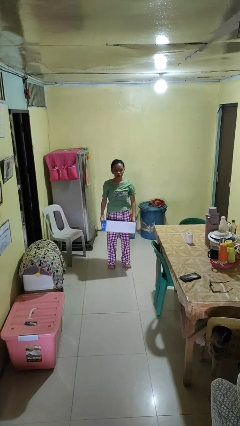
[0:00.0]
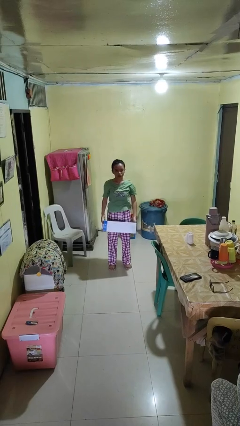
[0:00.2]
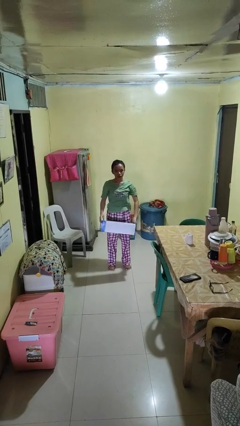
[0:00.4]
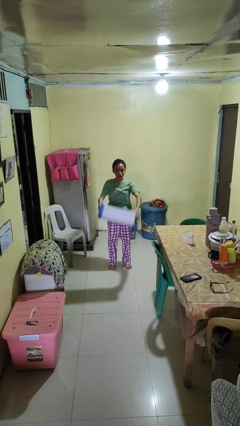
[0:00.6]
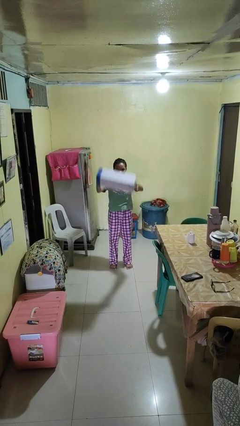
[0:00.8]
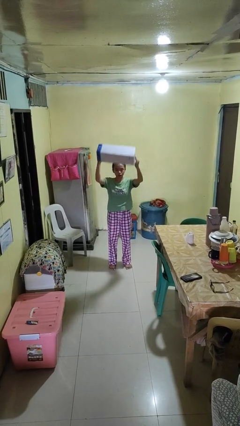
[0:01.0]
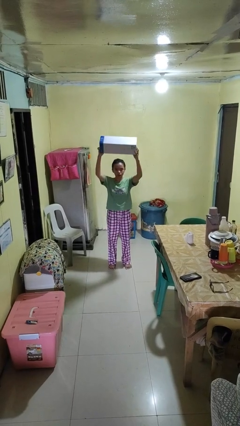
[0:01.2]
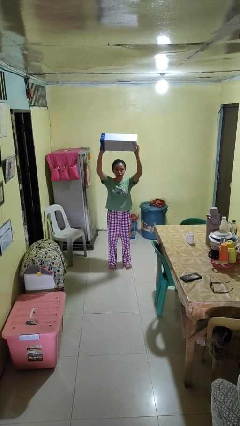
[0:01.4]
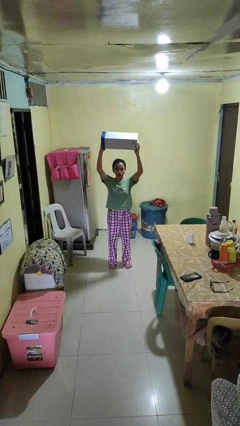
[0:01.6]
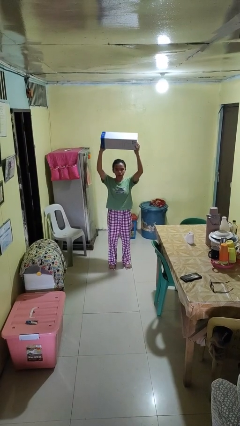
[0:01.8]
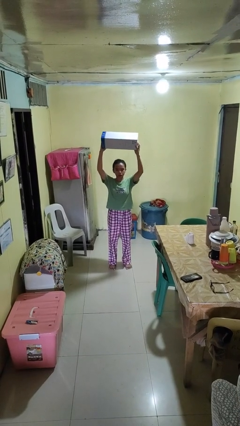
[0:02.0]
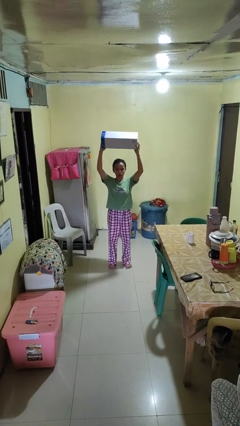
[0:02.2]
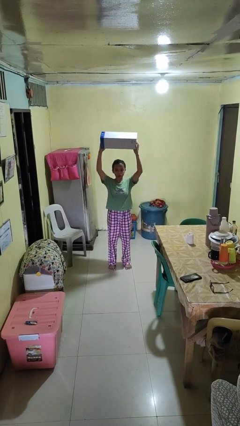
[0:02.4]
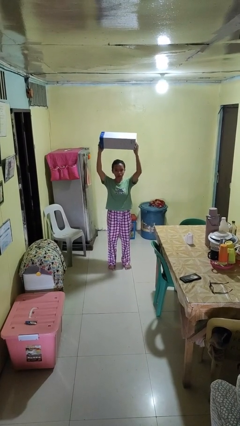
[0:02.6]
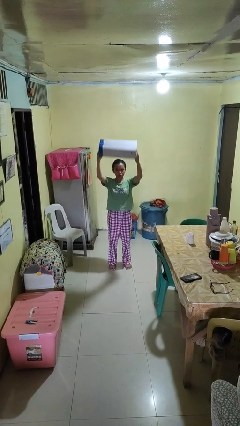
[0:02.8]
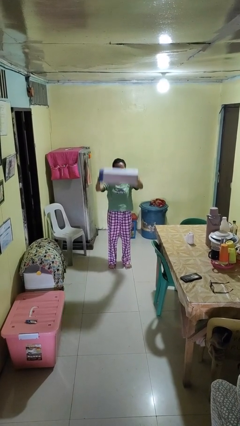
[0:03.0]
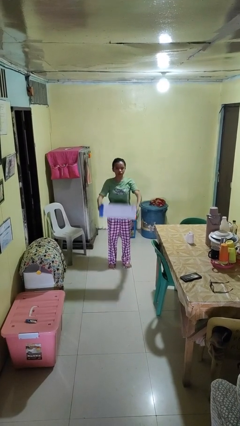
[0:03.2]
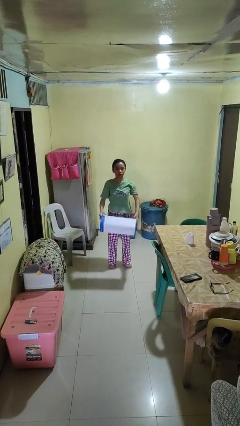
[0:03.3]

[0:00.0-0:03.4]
person holds object above head

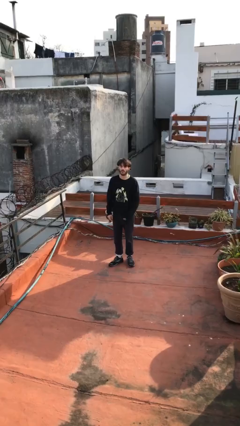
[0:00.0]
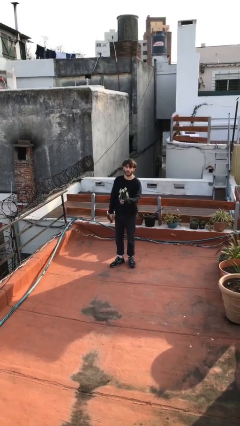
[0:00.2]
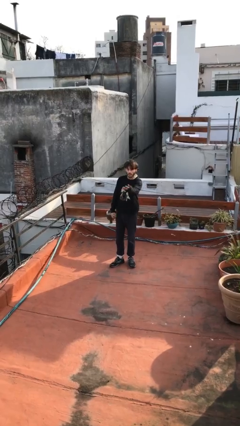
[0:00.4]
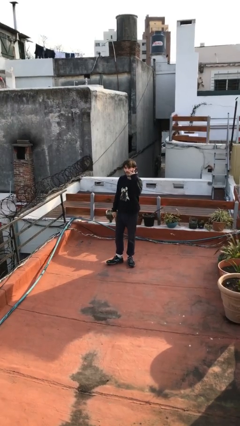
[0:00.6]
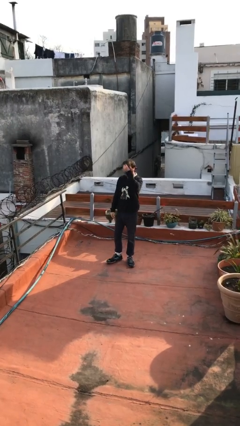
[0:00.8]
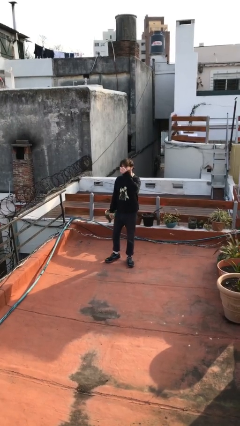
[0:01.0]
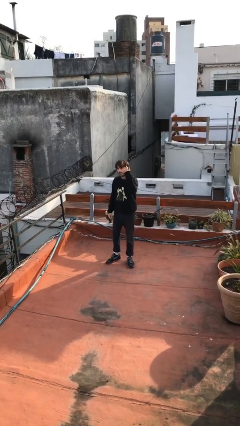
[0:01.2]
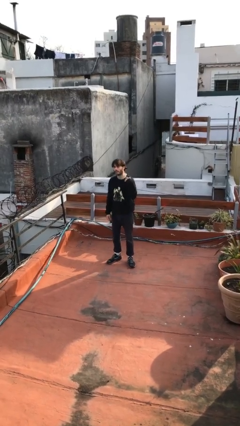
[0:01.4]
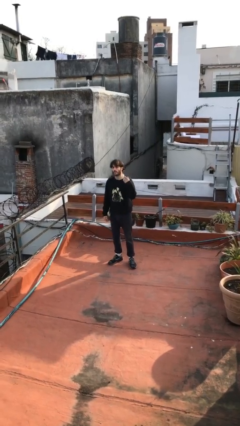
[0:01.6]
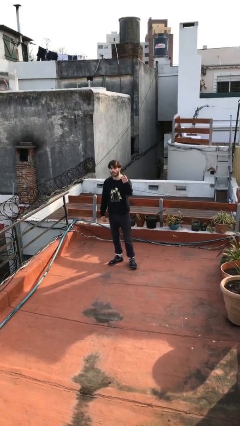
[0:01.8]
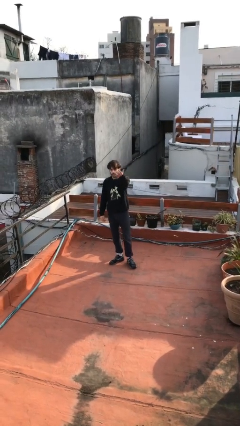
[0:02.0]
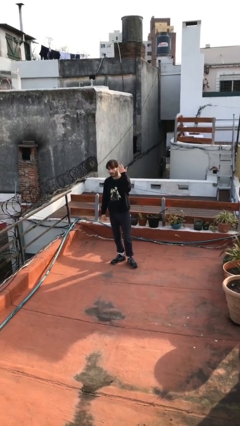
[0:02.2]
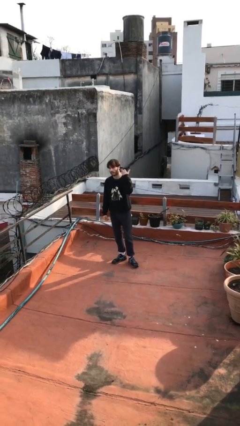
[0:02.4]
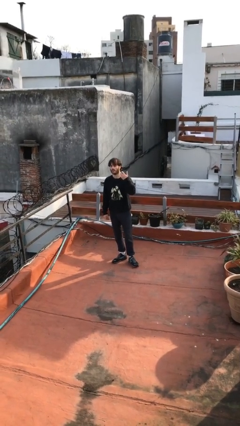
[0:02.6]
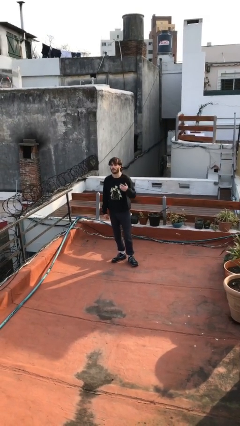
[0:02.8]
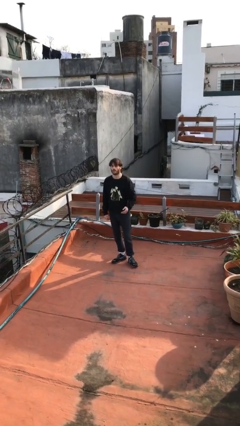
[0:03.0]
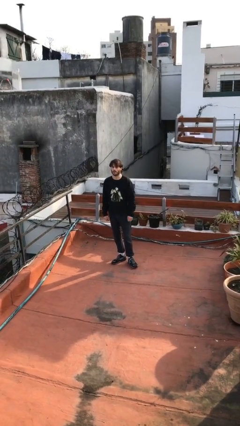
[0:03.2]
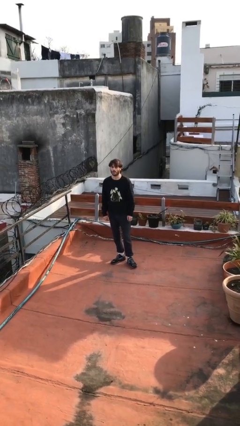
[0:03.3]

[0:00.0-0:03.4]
person gestures come here

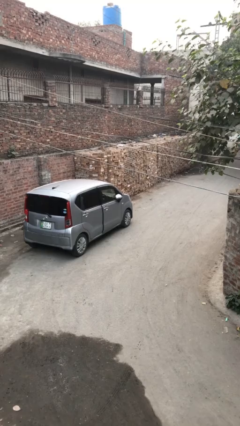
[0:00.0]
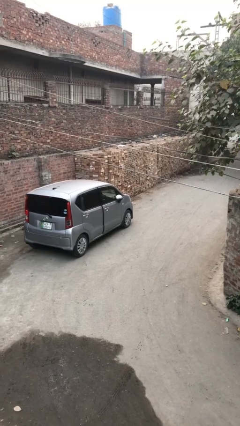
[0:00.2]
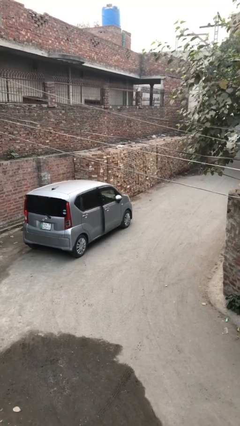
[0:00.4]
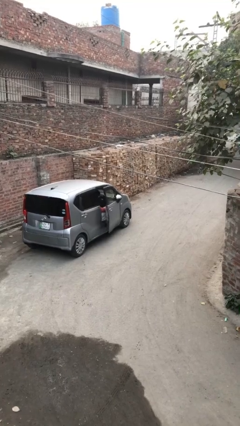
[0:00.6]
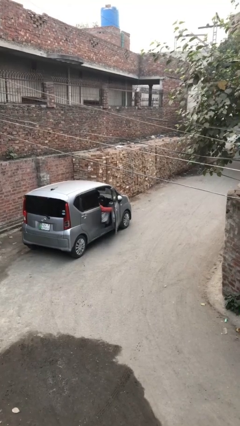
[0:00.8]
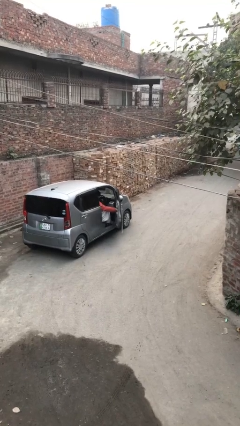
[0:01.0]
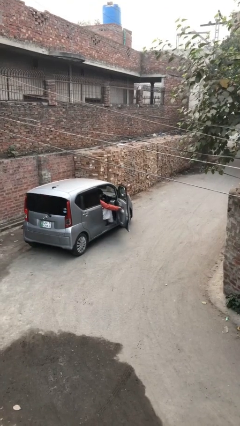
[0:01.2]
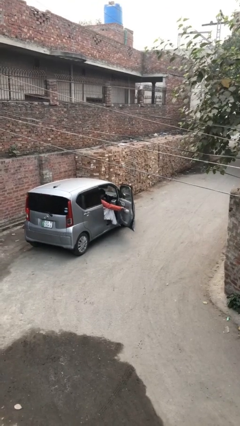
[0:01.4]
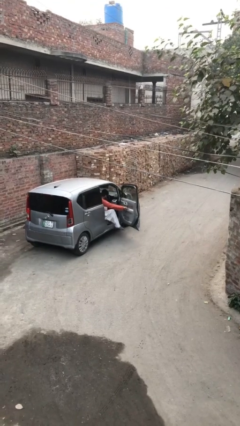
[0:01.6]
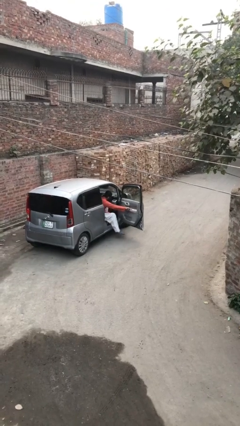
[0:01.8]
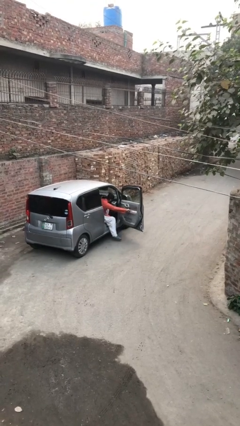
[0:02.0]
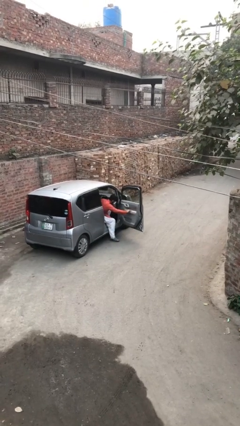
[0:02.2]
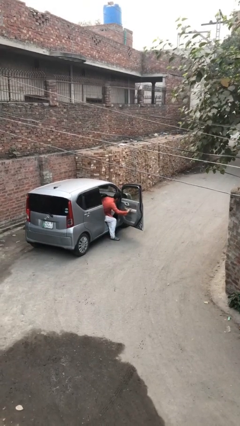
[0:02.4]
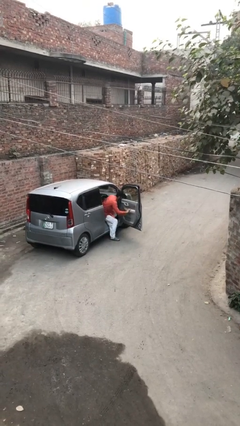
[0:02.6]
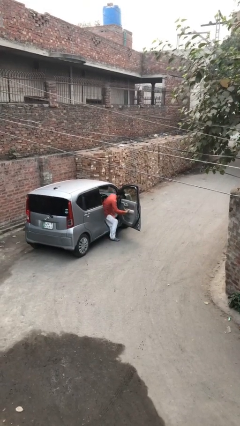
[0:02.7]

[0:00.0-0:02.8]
person opens car door

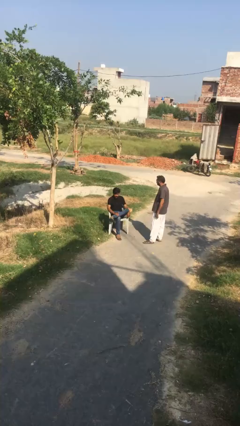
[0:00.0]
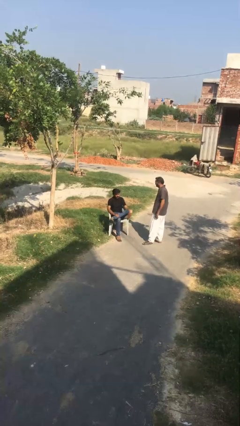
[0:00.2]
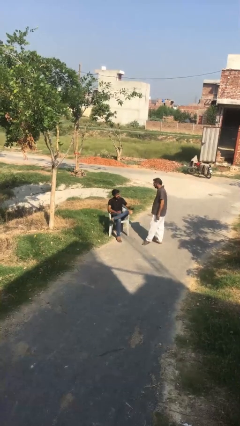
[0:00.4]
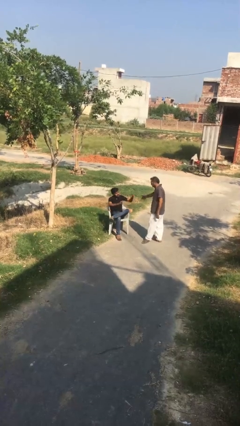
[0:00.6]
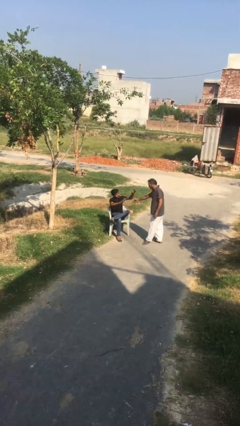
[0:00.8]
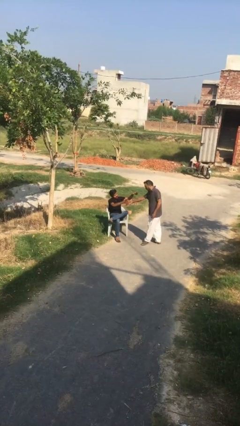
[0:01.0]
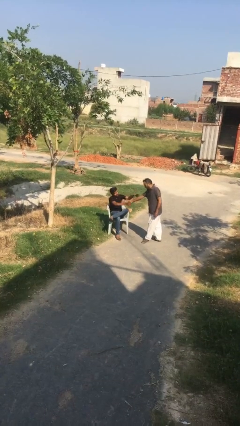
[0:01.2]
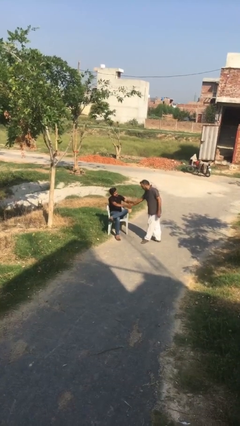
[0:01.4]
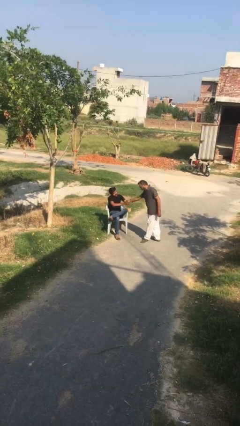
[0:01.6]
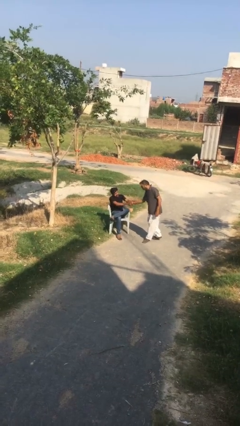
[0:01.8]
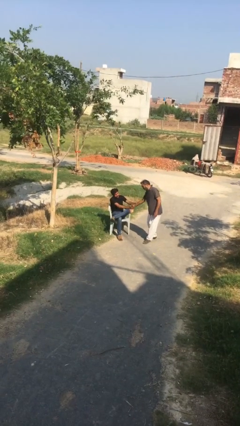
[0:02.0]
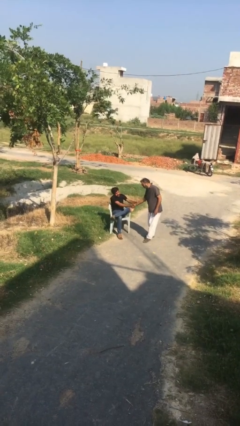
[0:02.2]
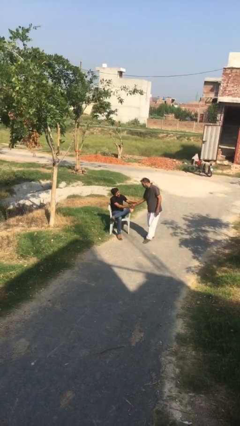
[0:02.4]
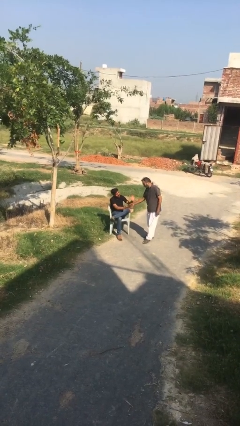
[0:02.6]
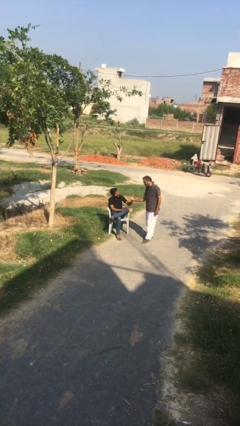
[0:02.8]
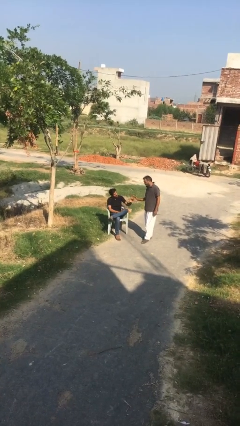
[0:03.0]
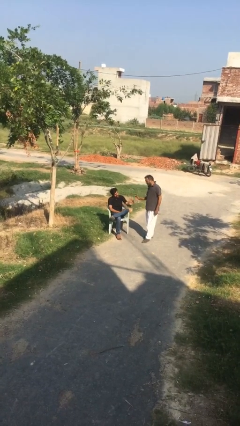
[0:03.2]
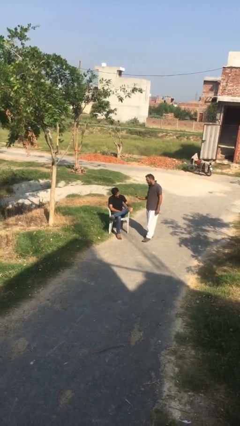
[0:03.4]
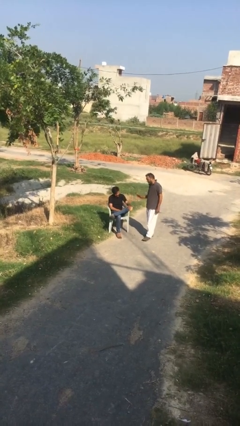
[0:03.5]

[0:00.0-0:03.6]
person shakes hand

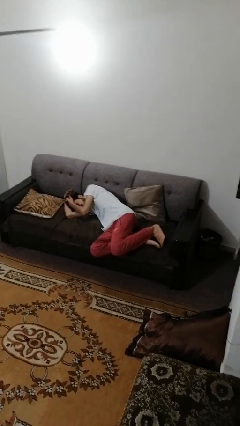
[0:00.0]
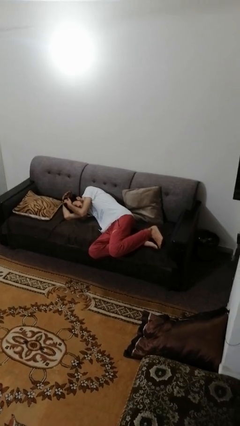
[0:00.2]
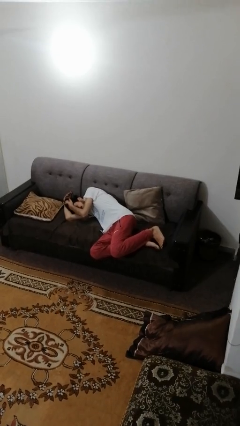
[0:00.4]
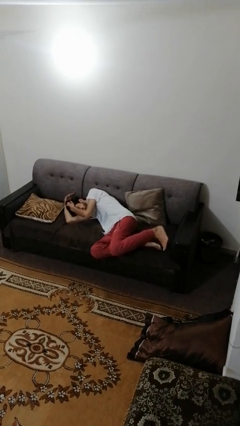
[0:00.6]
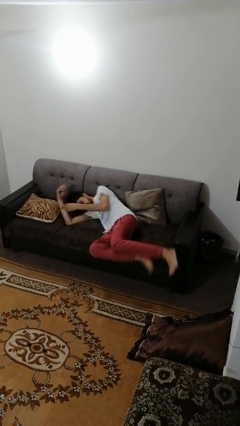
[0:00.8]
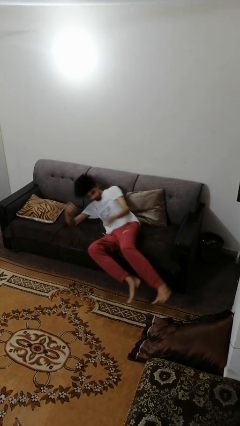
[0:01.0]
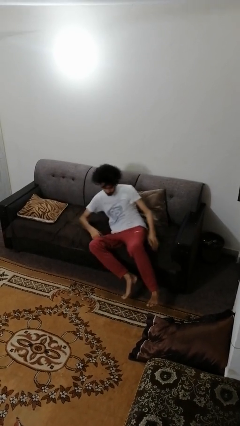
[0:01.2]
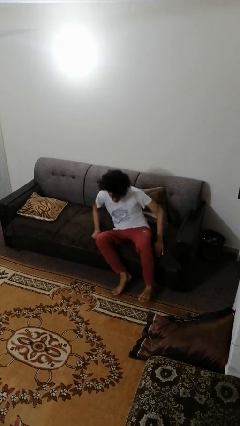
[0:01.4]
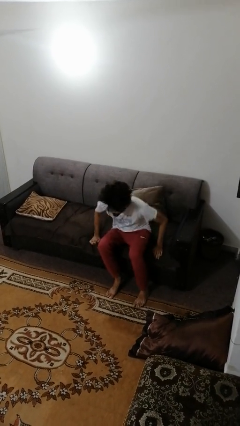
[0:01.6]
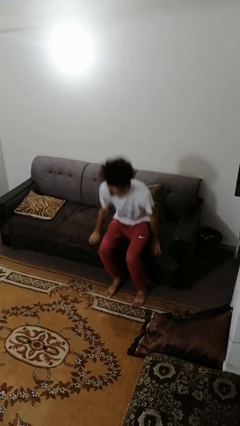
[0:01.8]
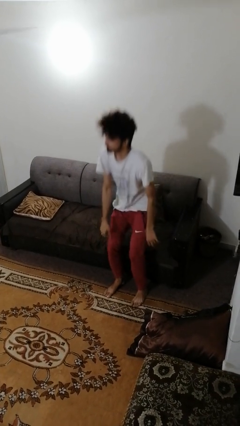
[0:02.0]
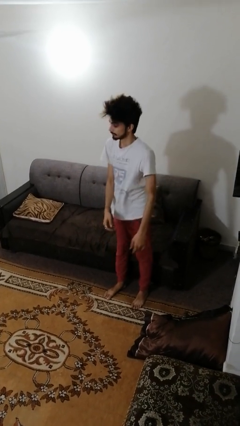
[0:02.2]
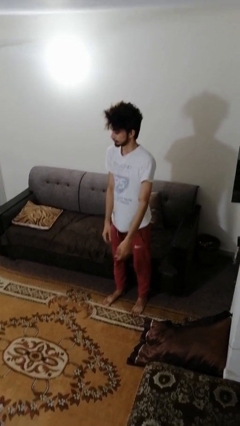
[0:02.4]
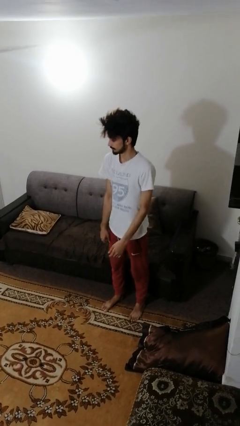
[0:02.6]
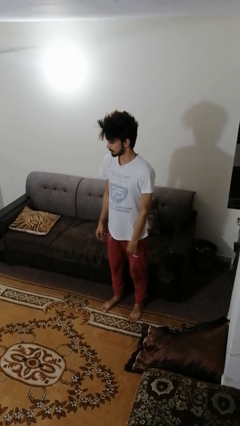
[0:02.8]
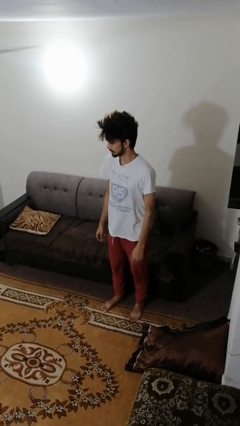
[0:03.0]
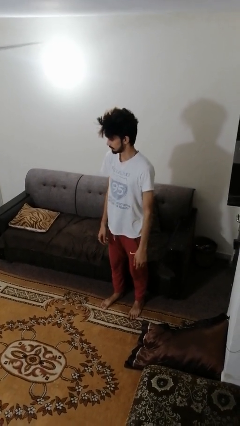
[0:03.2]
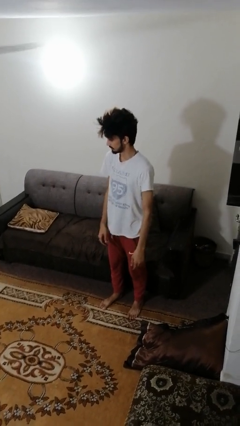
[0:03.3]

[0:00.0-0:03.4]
person stands up

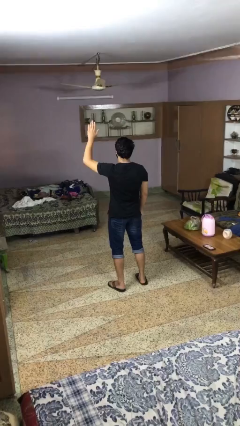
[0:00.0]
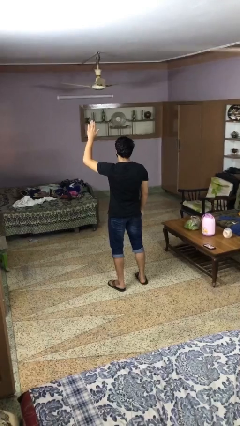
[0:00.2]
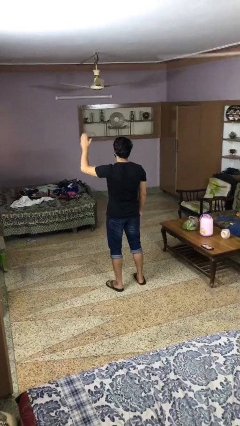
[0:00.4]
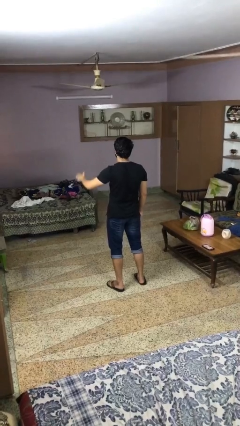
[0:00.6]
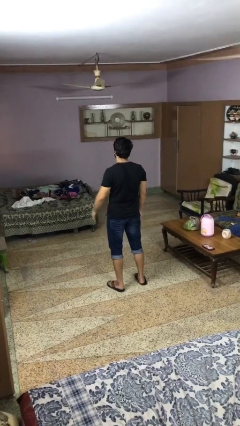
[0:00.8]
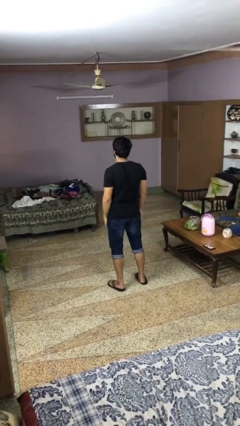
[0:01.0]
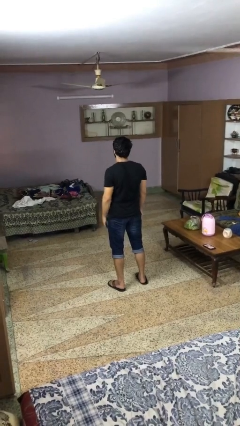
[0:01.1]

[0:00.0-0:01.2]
person gestures lower hand

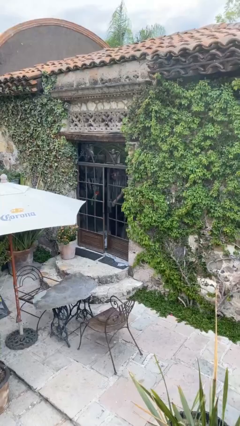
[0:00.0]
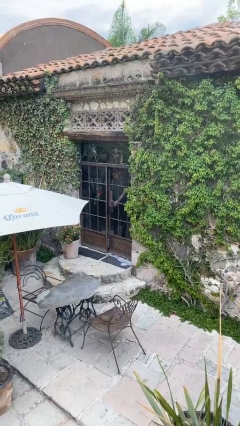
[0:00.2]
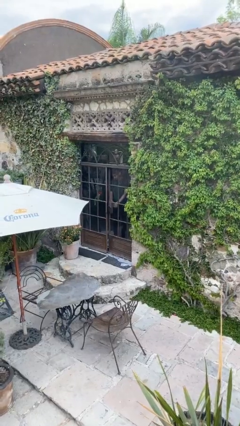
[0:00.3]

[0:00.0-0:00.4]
person closes facility door
